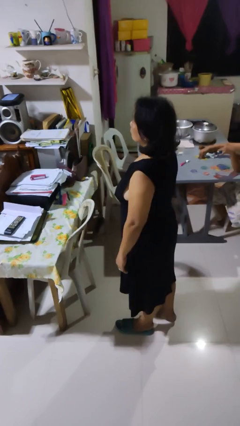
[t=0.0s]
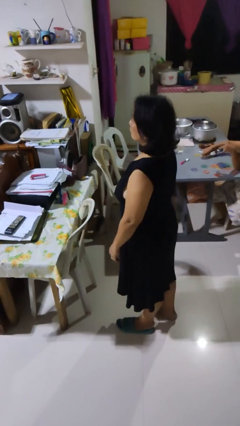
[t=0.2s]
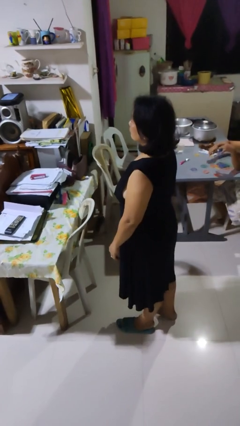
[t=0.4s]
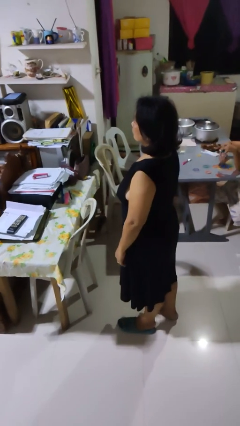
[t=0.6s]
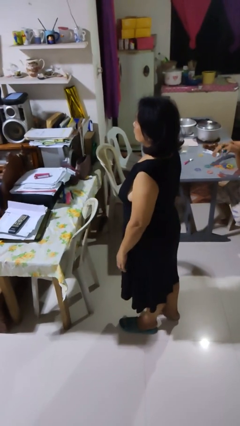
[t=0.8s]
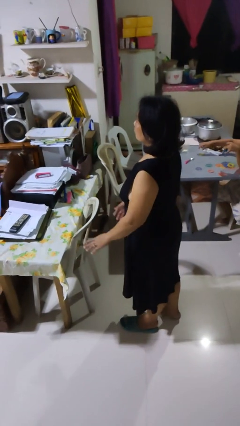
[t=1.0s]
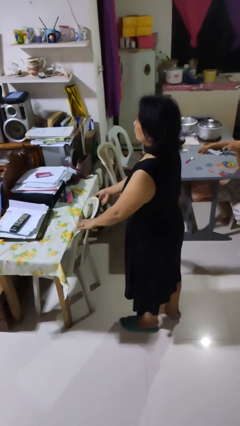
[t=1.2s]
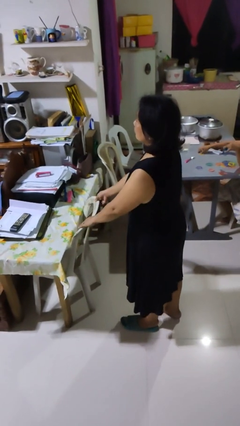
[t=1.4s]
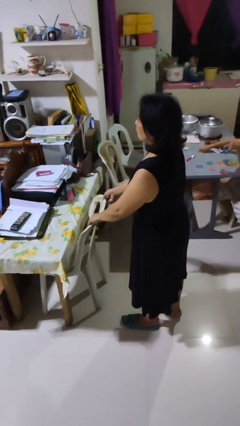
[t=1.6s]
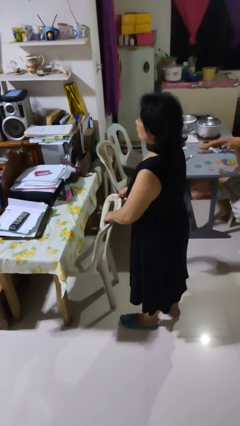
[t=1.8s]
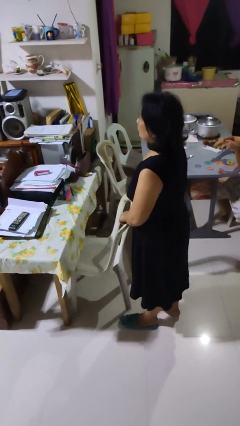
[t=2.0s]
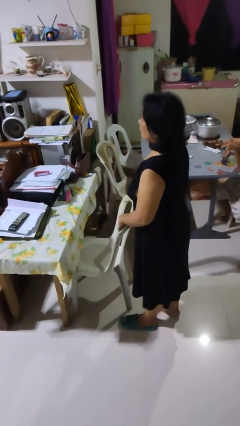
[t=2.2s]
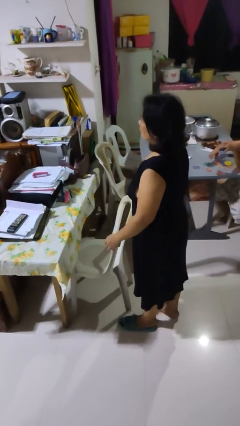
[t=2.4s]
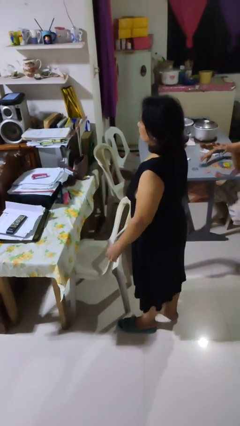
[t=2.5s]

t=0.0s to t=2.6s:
person pulls out chair

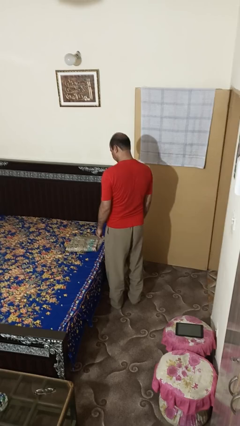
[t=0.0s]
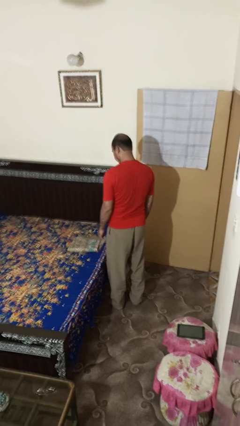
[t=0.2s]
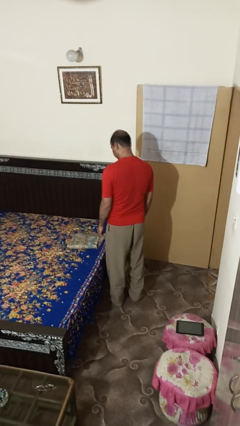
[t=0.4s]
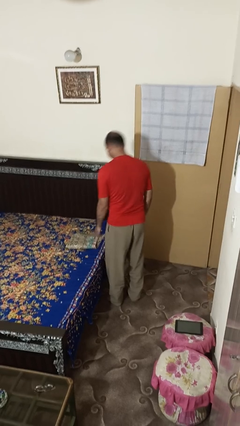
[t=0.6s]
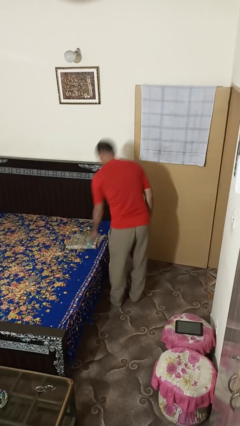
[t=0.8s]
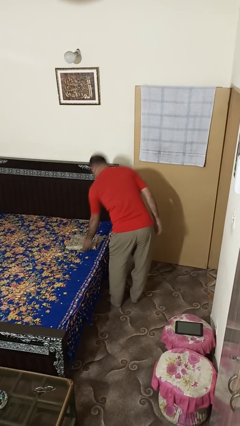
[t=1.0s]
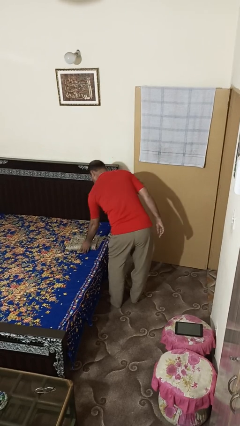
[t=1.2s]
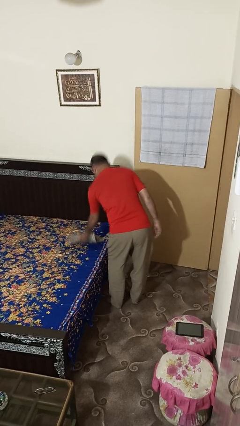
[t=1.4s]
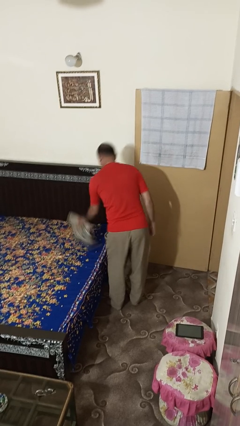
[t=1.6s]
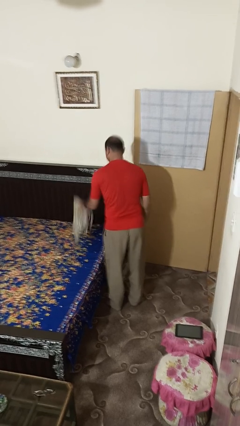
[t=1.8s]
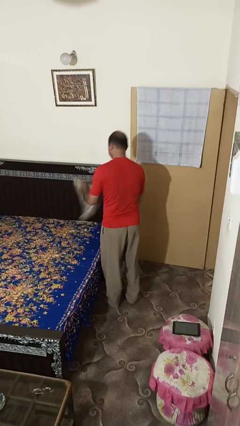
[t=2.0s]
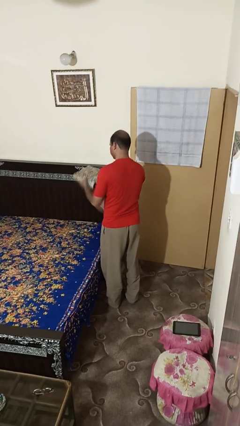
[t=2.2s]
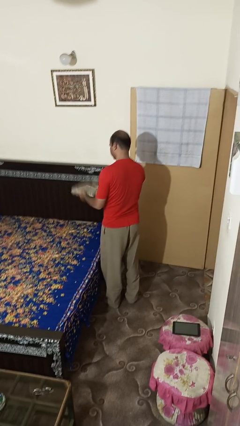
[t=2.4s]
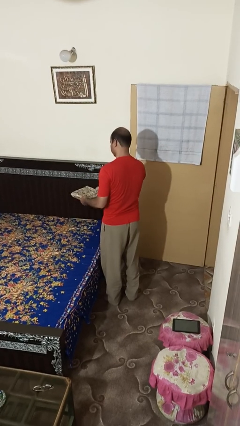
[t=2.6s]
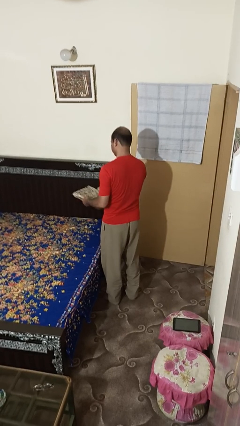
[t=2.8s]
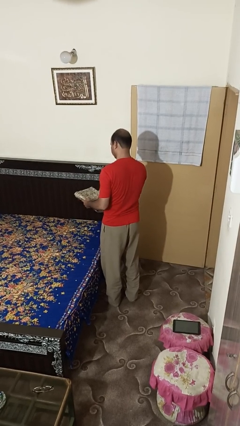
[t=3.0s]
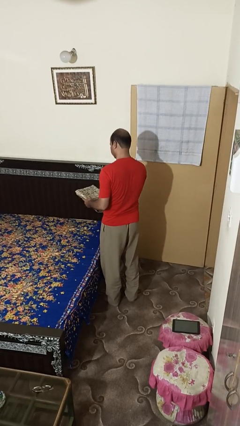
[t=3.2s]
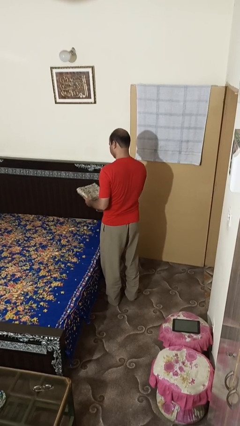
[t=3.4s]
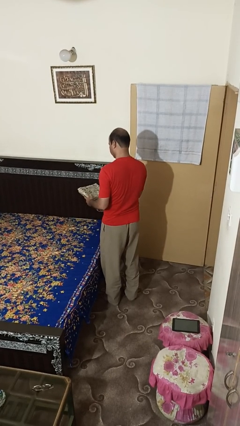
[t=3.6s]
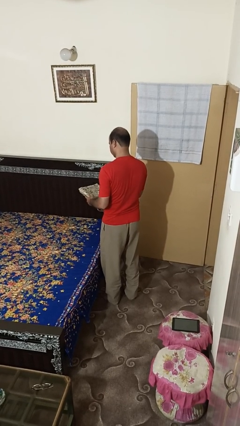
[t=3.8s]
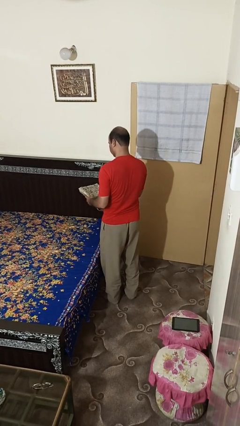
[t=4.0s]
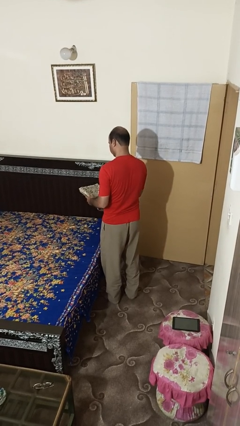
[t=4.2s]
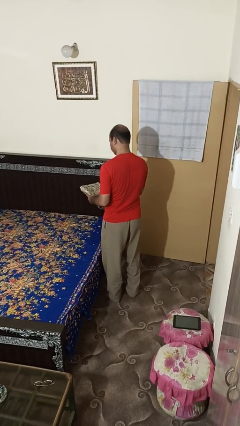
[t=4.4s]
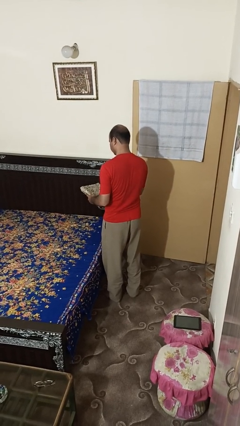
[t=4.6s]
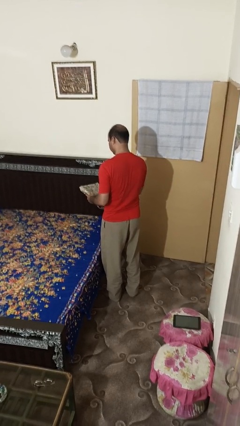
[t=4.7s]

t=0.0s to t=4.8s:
person picks up object from bed

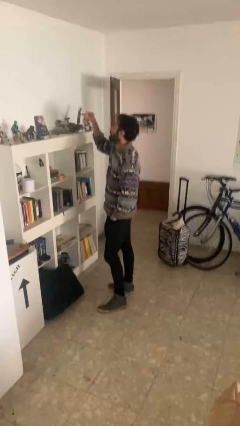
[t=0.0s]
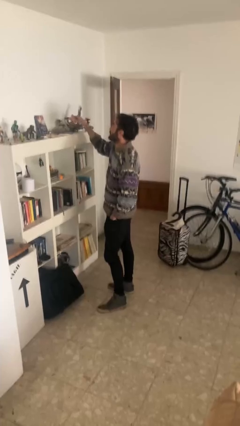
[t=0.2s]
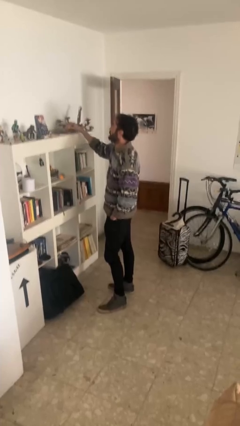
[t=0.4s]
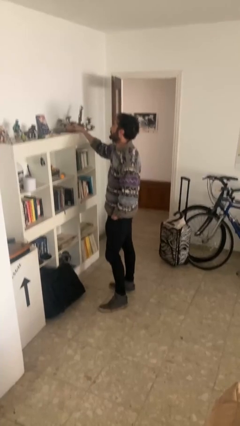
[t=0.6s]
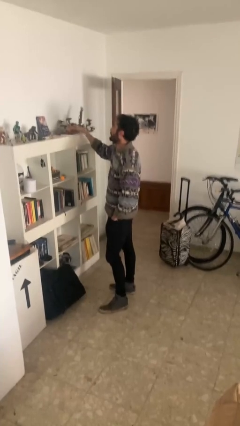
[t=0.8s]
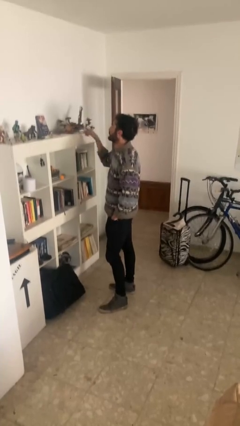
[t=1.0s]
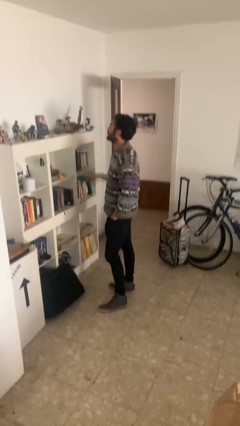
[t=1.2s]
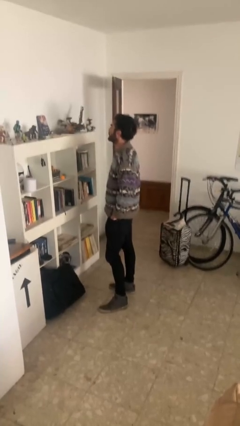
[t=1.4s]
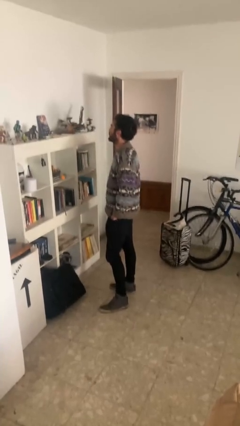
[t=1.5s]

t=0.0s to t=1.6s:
person puts down object on shelf

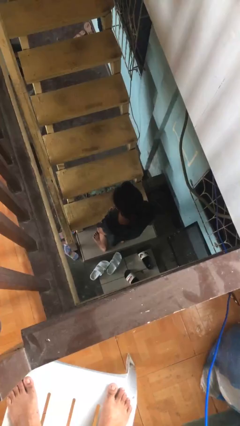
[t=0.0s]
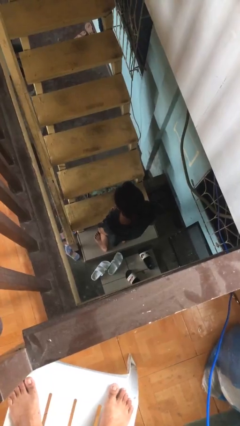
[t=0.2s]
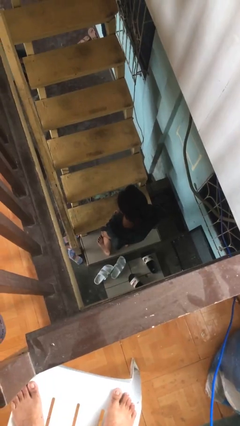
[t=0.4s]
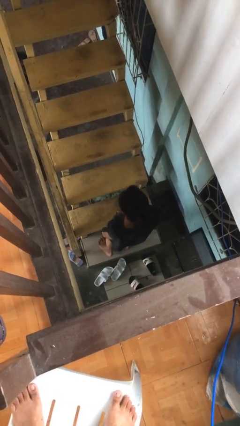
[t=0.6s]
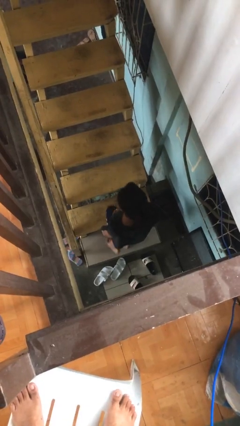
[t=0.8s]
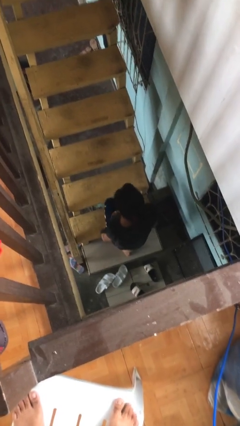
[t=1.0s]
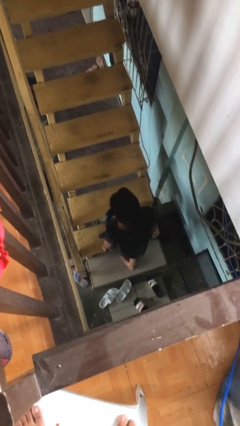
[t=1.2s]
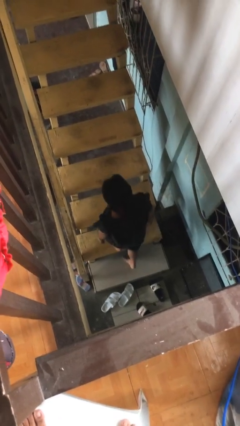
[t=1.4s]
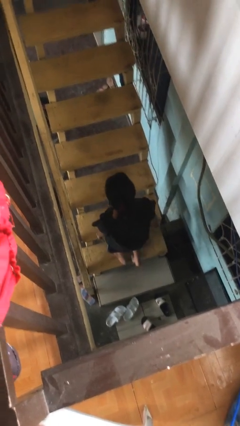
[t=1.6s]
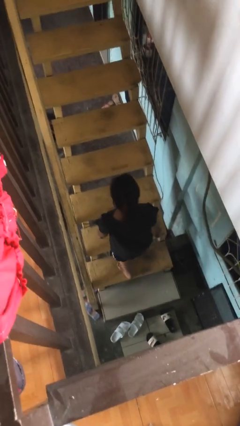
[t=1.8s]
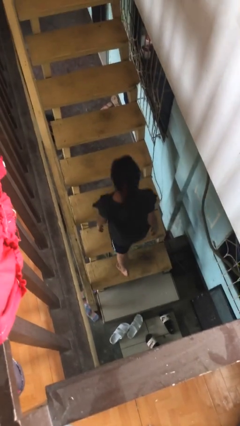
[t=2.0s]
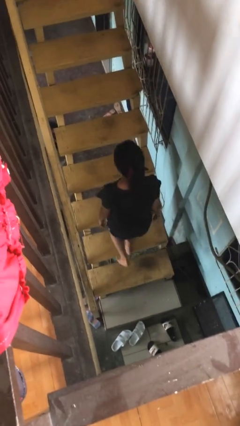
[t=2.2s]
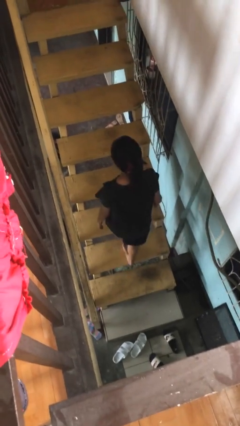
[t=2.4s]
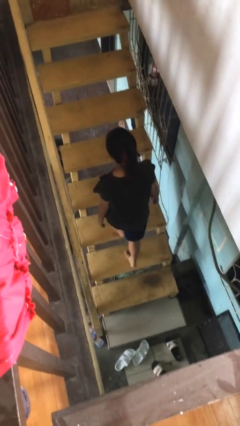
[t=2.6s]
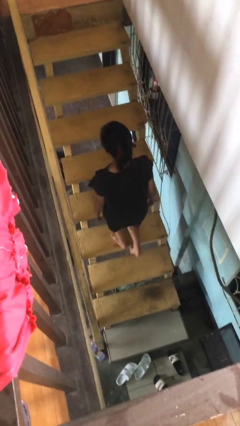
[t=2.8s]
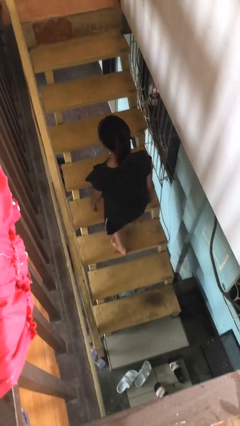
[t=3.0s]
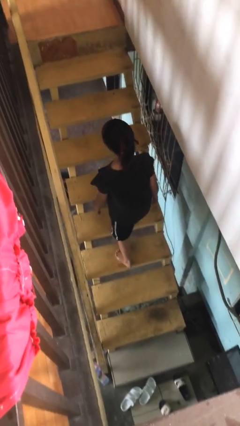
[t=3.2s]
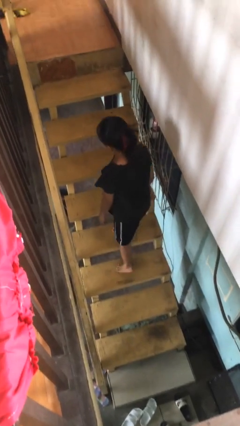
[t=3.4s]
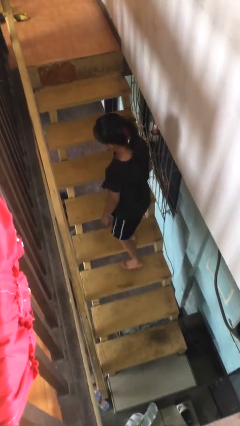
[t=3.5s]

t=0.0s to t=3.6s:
person climbs up stairs

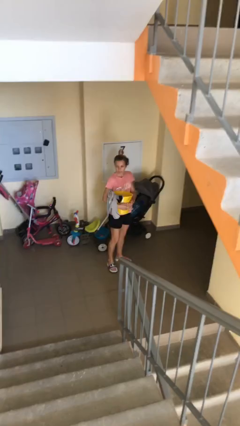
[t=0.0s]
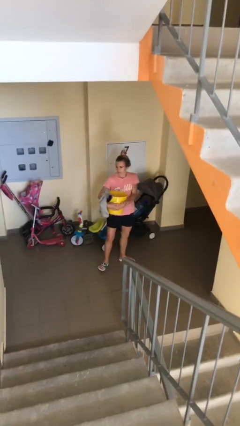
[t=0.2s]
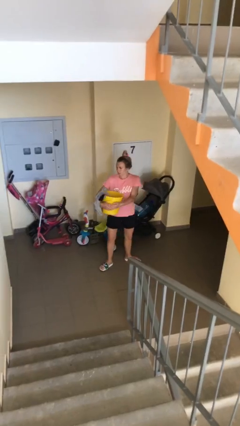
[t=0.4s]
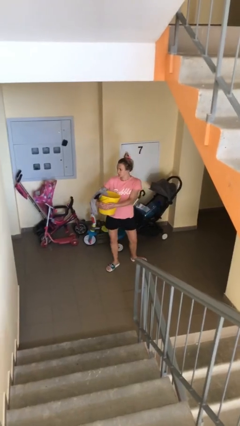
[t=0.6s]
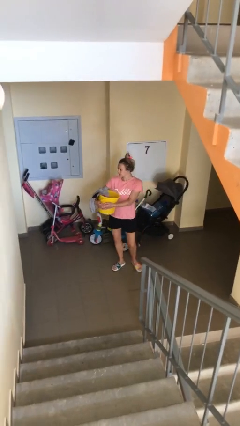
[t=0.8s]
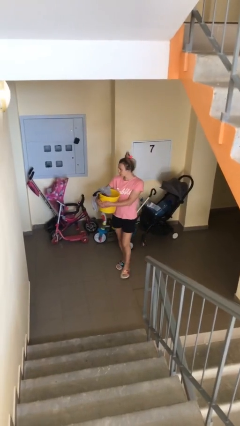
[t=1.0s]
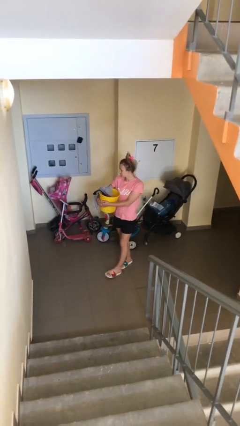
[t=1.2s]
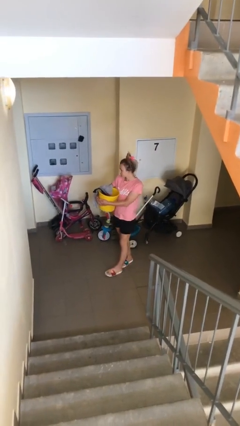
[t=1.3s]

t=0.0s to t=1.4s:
person carries laundry basket

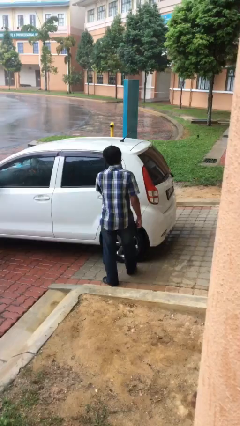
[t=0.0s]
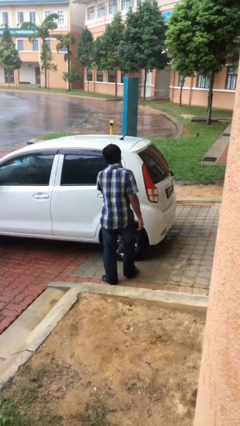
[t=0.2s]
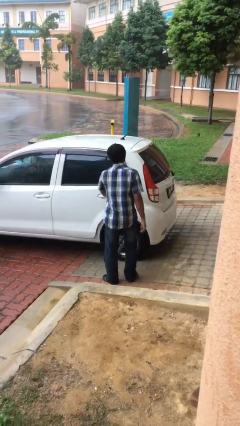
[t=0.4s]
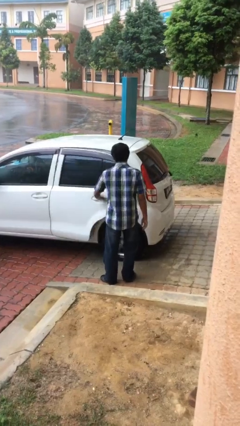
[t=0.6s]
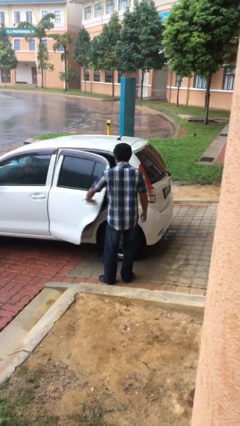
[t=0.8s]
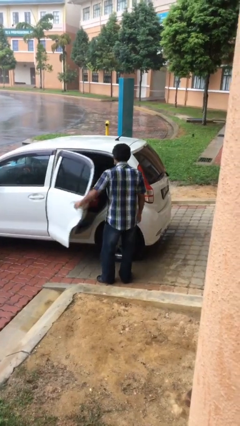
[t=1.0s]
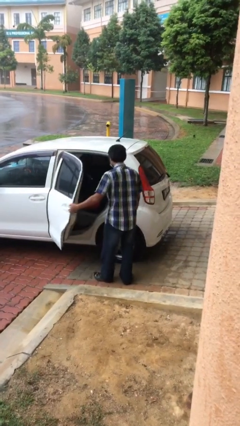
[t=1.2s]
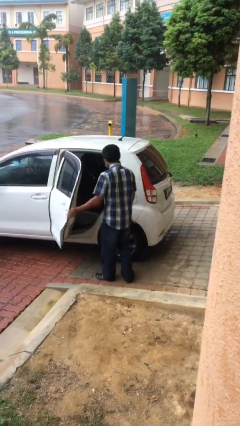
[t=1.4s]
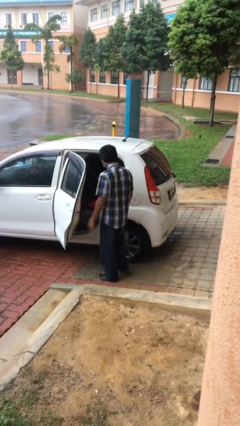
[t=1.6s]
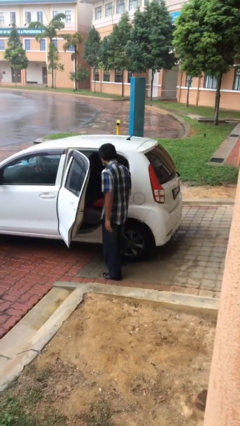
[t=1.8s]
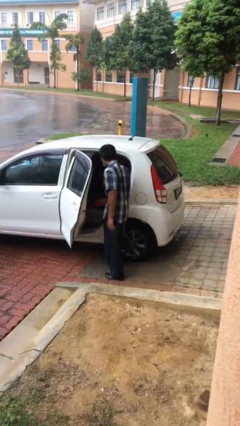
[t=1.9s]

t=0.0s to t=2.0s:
person opens car door

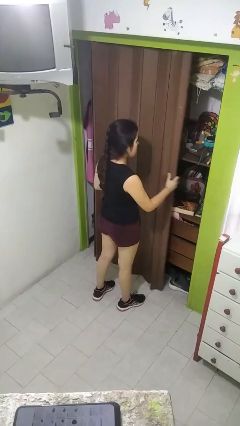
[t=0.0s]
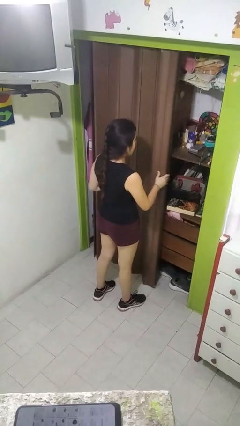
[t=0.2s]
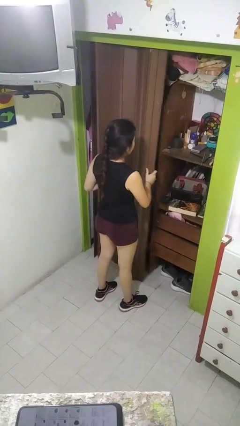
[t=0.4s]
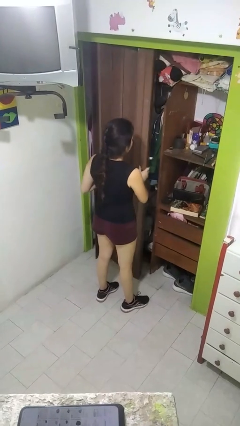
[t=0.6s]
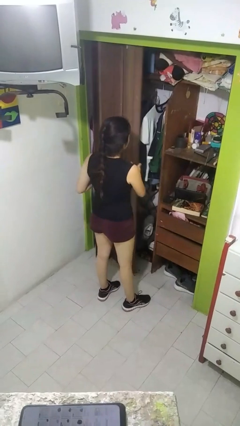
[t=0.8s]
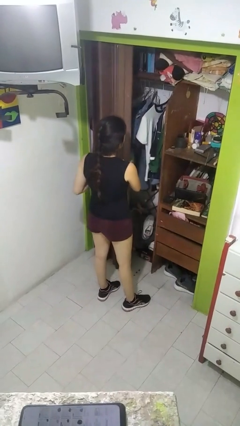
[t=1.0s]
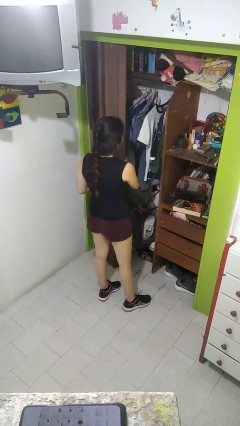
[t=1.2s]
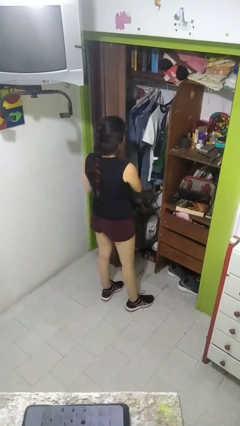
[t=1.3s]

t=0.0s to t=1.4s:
person opens closet door

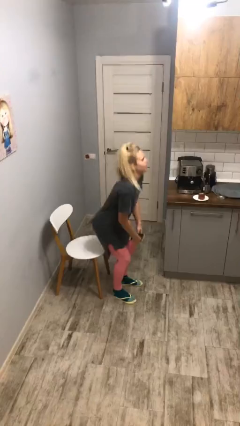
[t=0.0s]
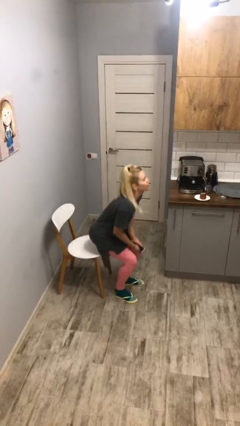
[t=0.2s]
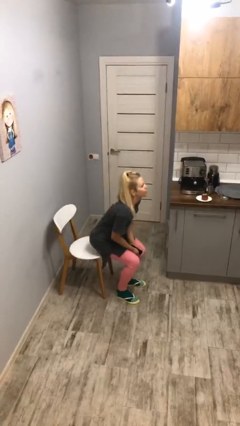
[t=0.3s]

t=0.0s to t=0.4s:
person sits down
